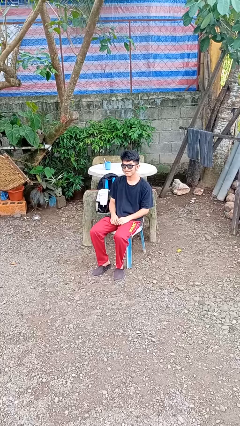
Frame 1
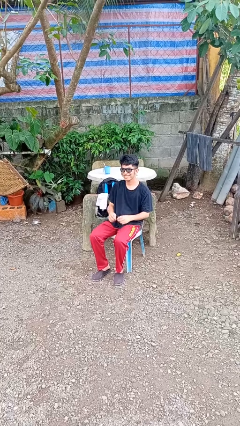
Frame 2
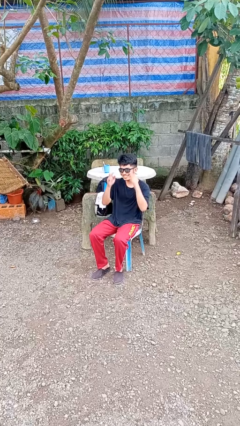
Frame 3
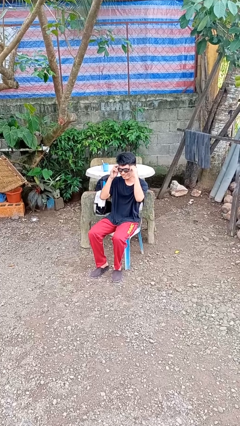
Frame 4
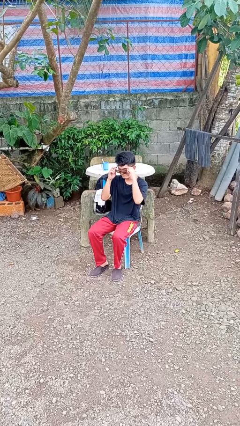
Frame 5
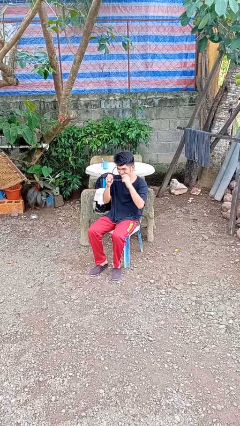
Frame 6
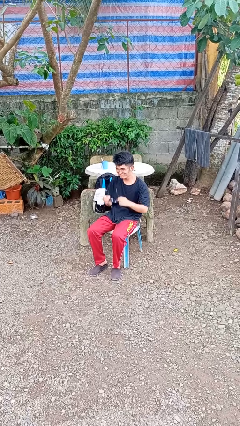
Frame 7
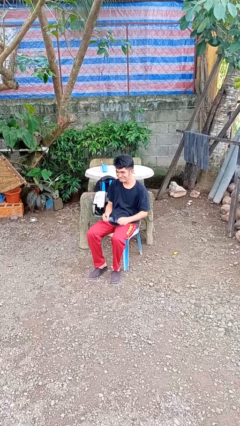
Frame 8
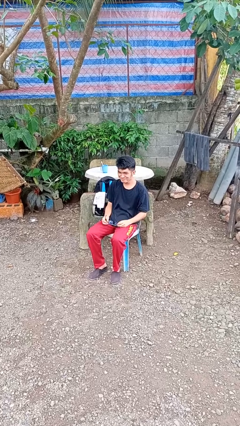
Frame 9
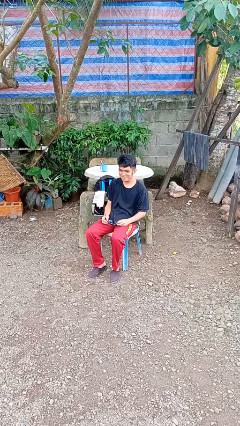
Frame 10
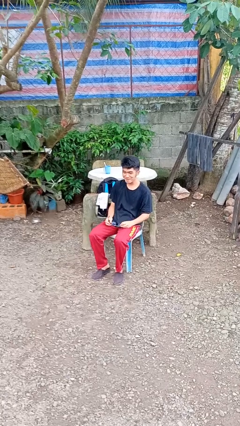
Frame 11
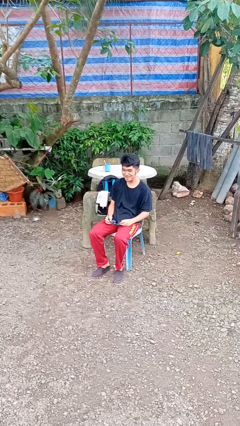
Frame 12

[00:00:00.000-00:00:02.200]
person takes off sunglasses

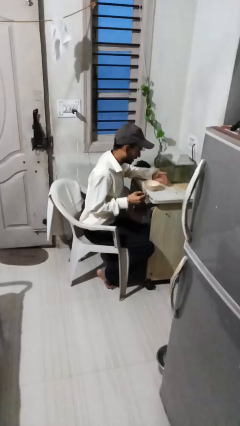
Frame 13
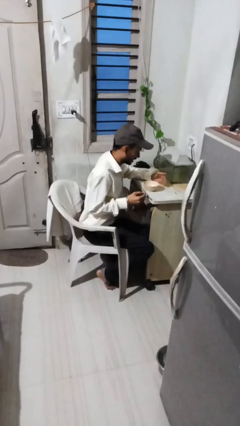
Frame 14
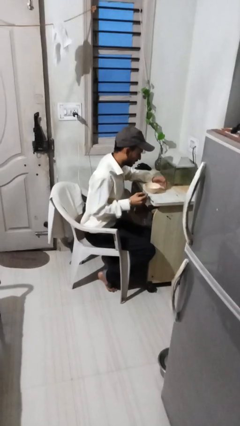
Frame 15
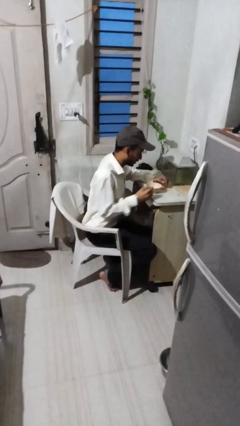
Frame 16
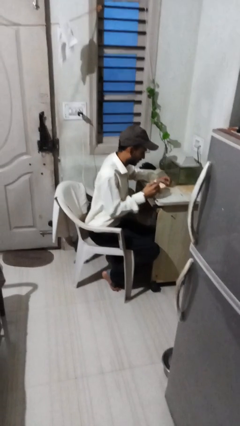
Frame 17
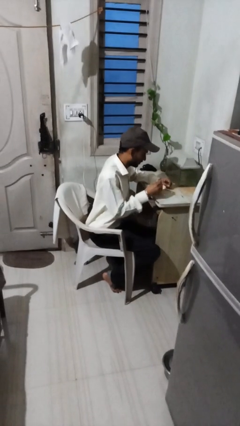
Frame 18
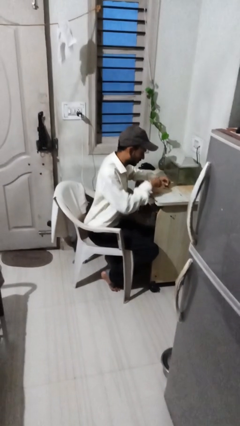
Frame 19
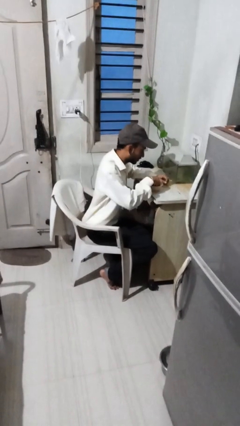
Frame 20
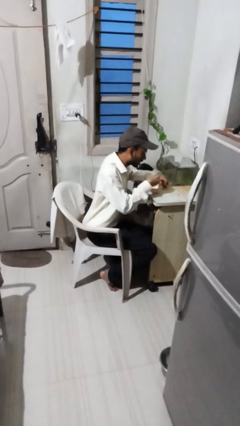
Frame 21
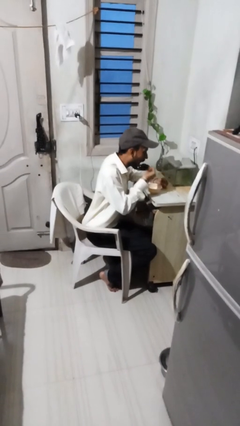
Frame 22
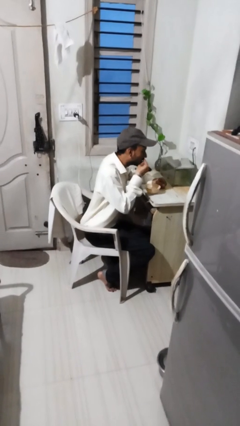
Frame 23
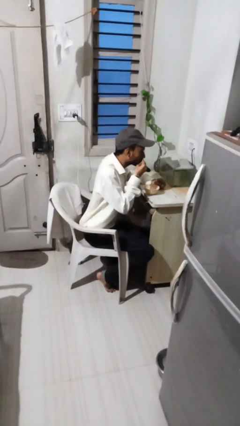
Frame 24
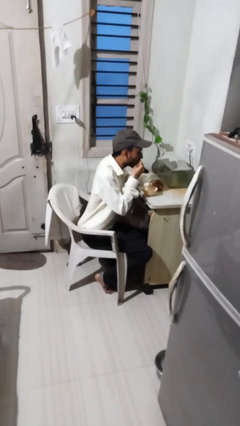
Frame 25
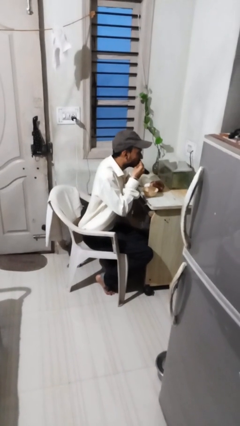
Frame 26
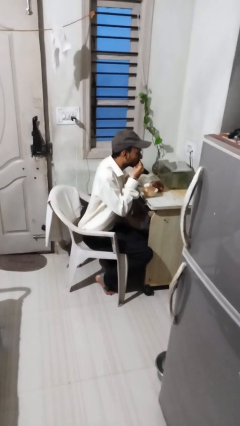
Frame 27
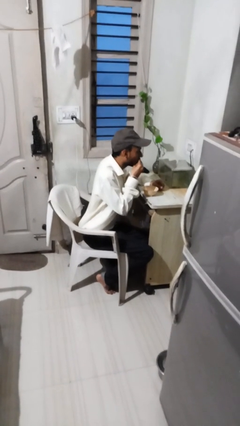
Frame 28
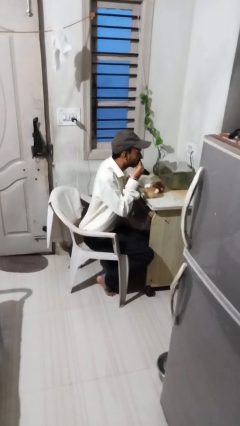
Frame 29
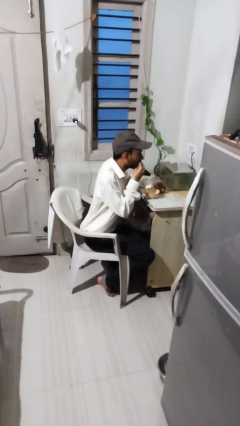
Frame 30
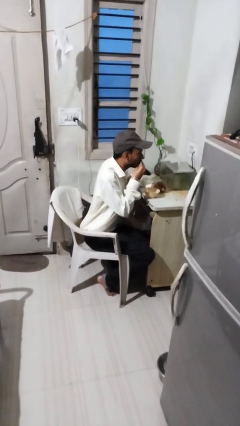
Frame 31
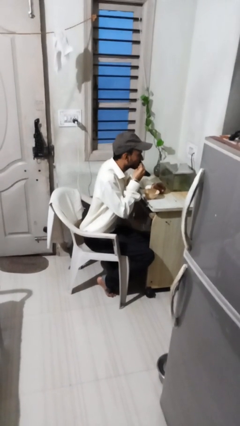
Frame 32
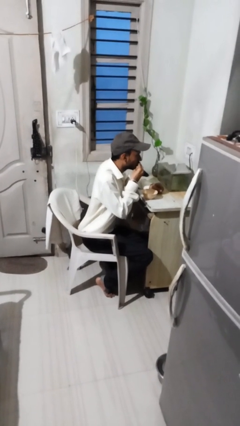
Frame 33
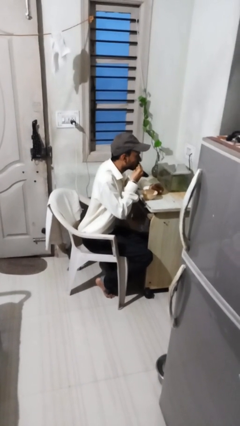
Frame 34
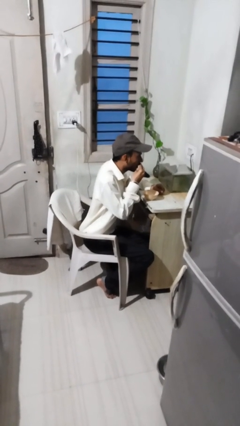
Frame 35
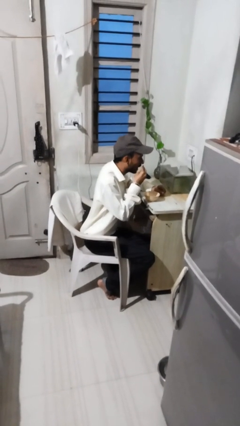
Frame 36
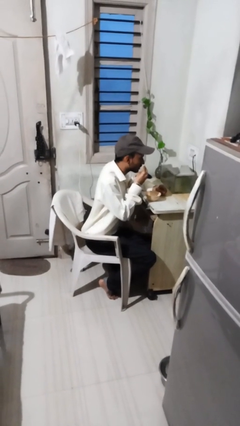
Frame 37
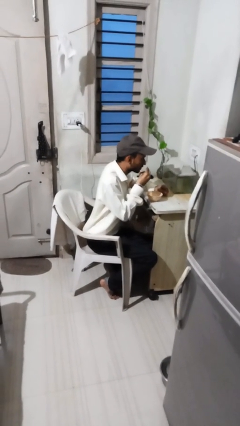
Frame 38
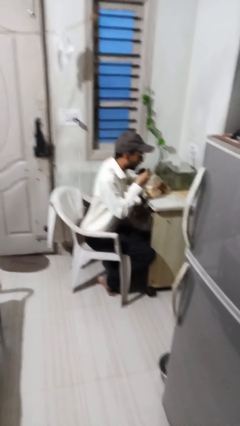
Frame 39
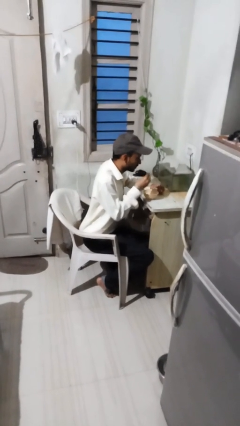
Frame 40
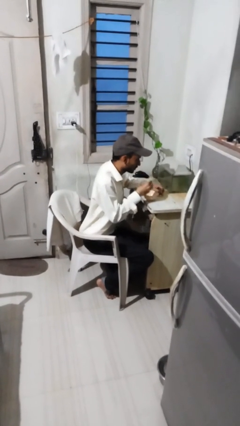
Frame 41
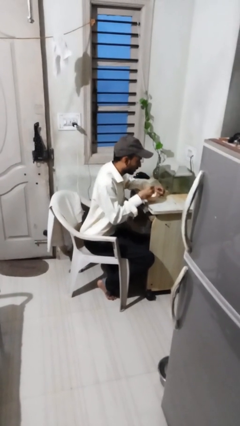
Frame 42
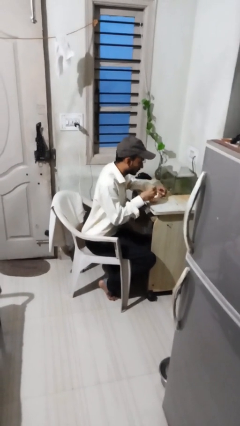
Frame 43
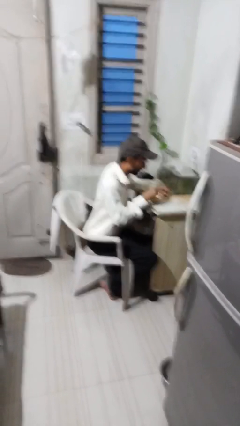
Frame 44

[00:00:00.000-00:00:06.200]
person eats with hands

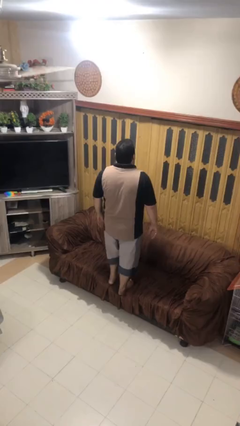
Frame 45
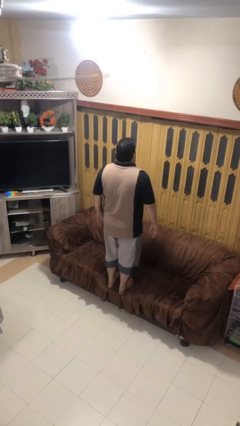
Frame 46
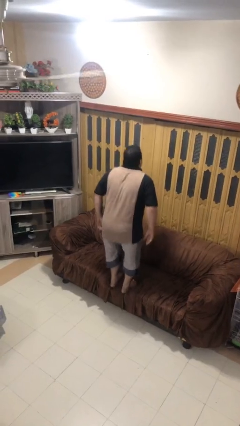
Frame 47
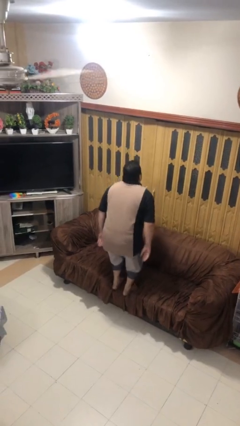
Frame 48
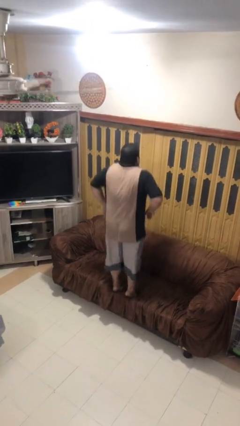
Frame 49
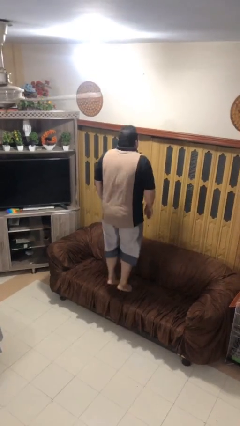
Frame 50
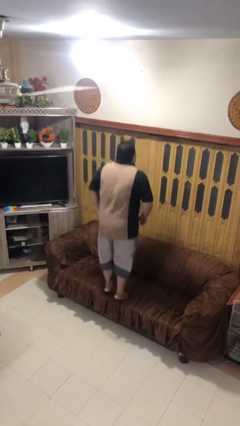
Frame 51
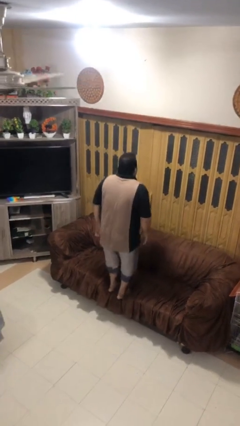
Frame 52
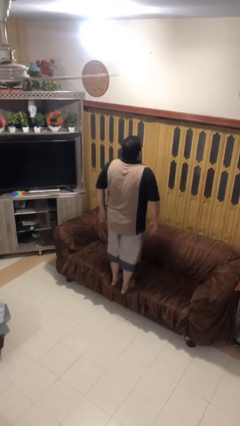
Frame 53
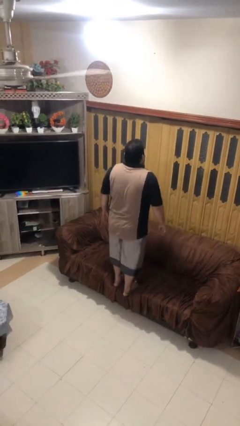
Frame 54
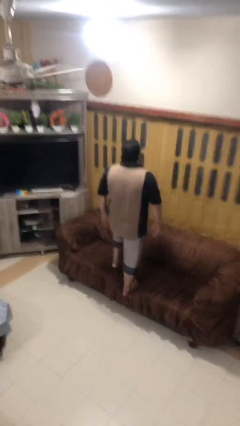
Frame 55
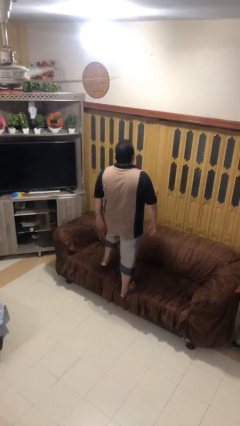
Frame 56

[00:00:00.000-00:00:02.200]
person jumps on couch

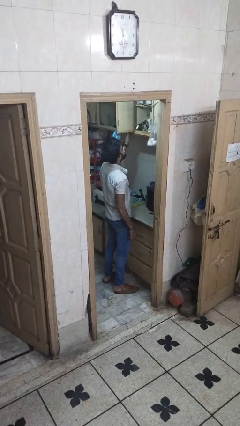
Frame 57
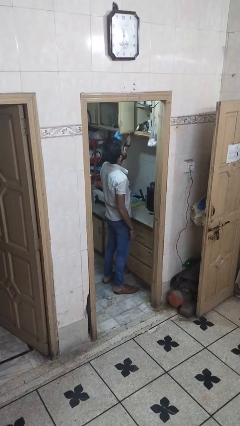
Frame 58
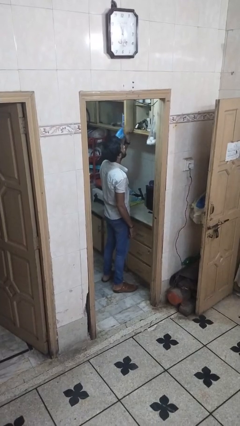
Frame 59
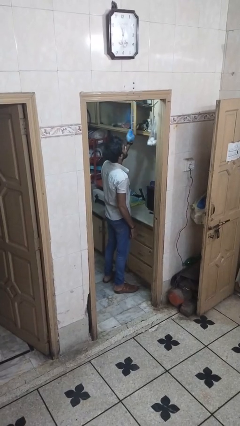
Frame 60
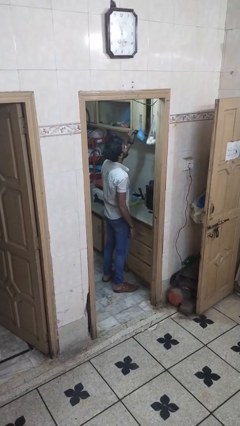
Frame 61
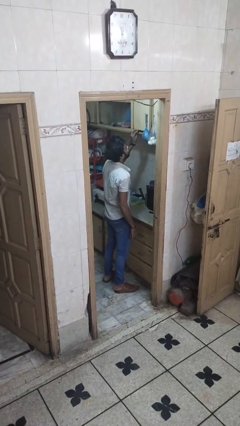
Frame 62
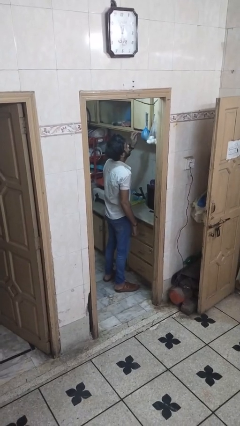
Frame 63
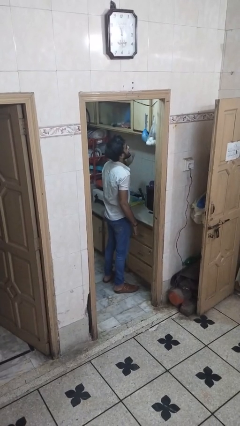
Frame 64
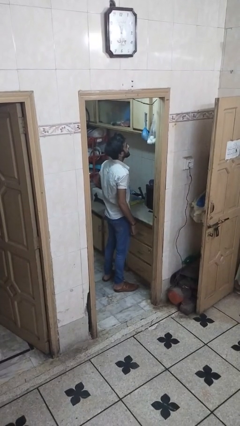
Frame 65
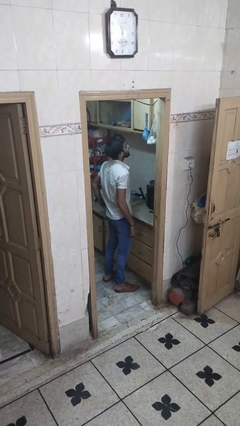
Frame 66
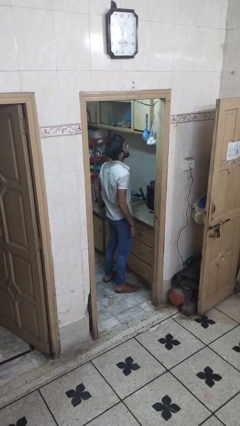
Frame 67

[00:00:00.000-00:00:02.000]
person closes cabinet

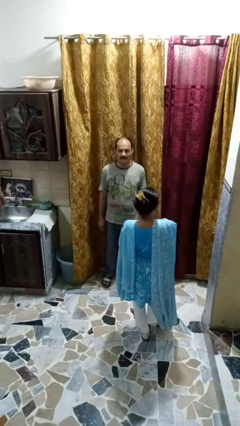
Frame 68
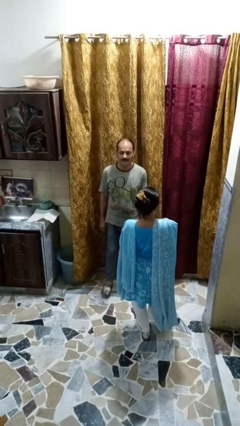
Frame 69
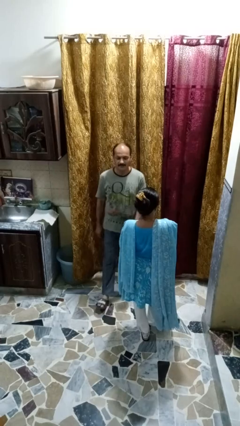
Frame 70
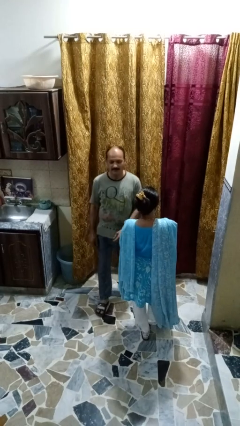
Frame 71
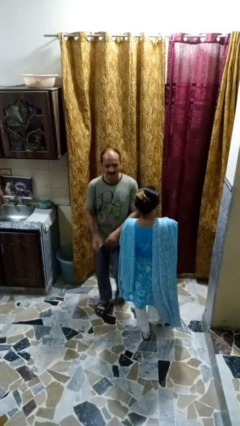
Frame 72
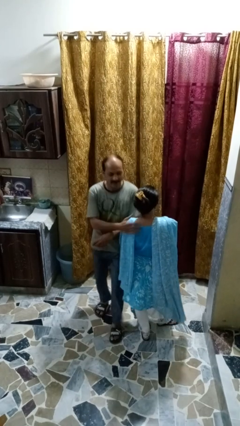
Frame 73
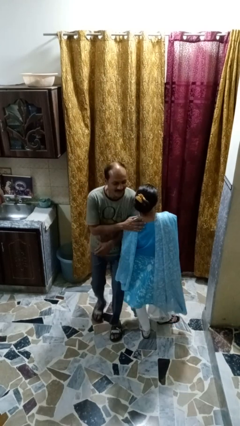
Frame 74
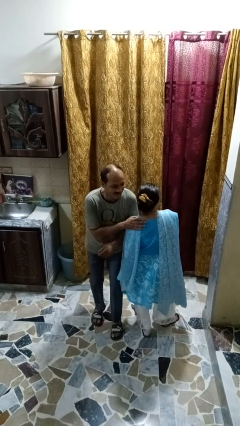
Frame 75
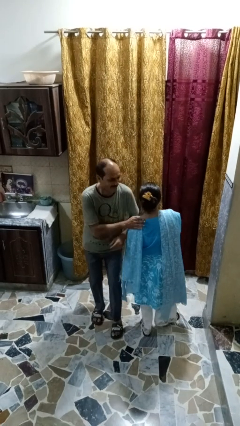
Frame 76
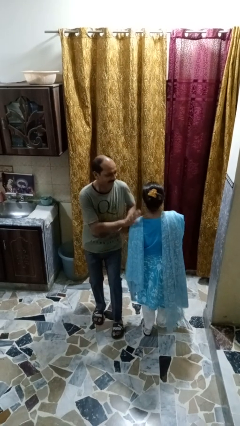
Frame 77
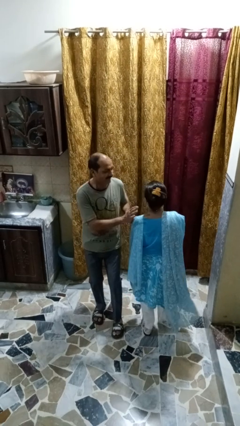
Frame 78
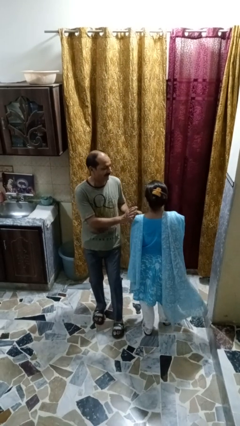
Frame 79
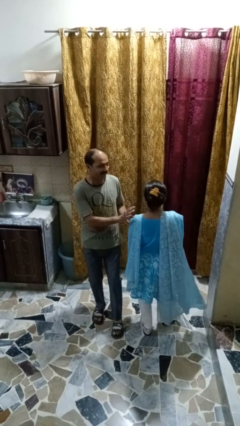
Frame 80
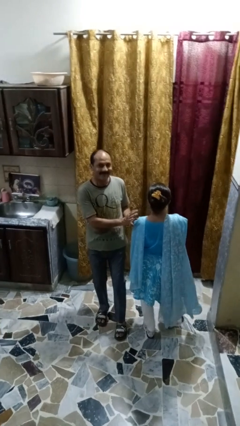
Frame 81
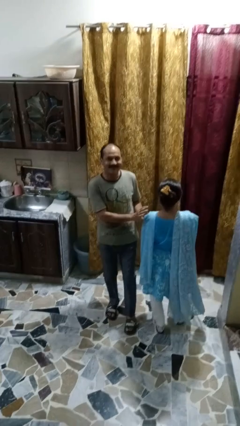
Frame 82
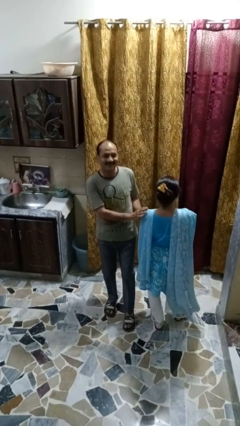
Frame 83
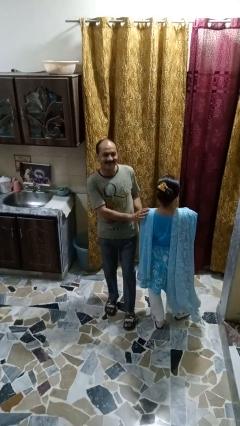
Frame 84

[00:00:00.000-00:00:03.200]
person bumps into person

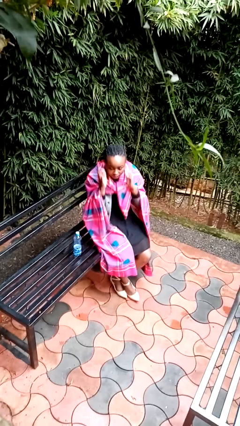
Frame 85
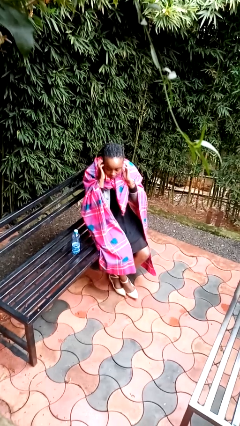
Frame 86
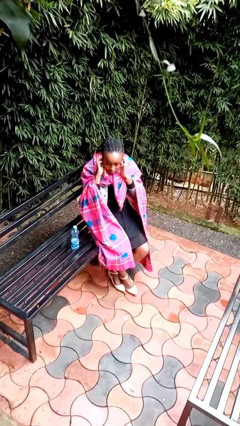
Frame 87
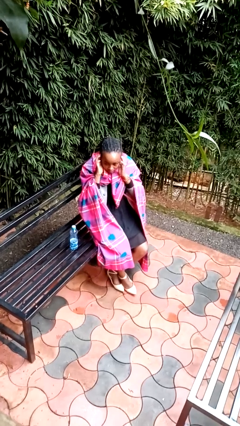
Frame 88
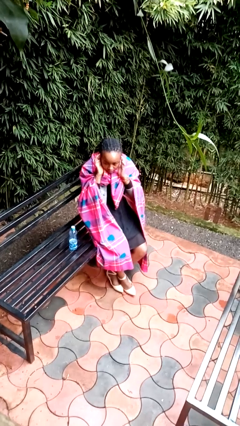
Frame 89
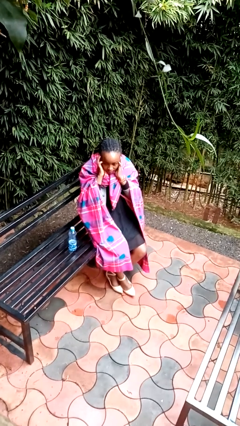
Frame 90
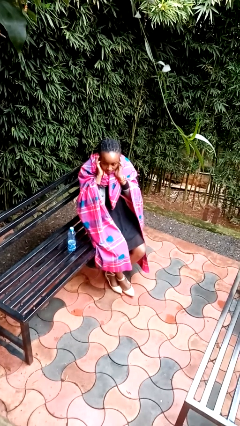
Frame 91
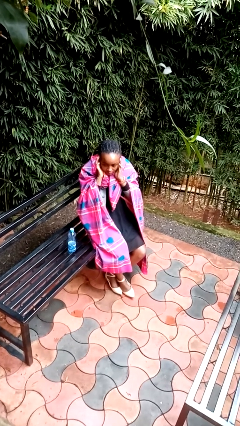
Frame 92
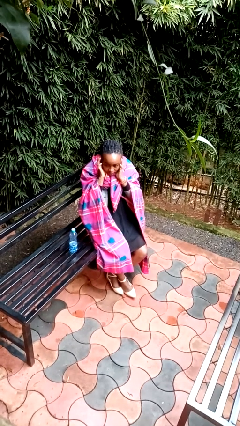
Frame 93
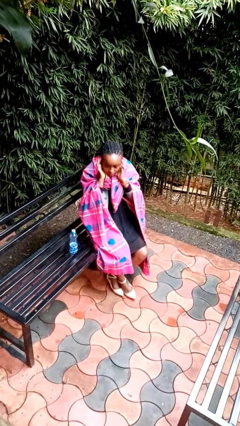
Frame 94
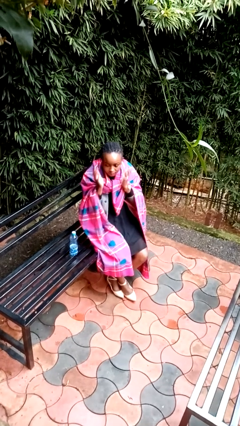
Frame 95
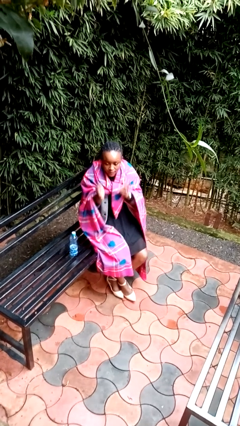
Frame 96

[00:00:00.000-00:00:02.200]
person puts fingers in ear
